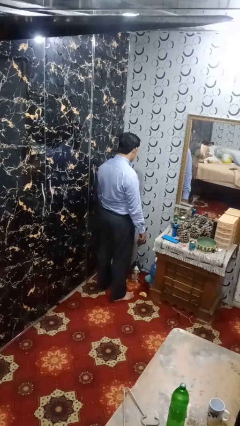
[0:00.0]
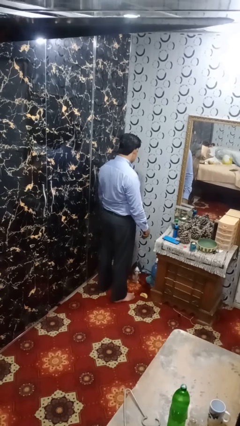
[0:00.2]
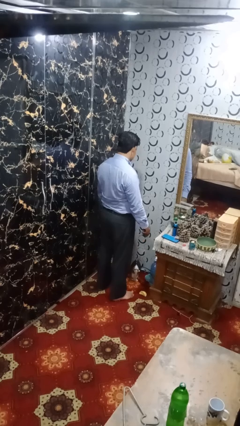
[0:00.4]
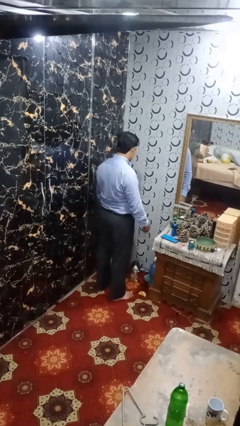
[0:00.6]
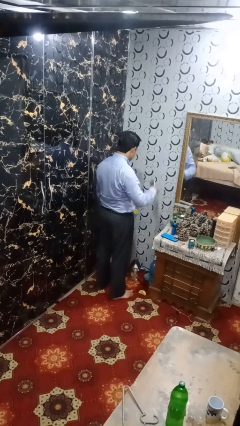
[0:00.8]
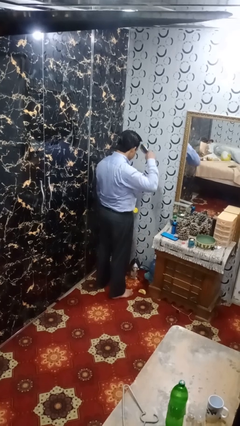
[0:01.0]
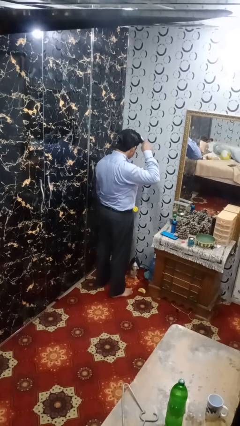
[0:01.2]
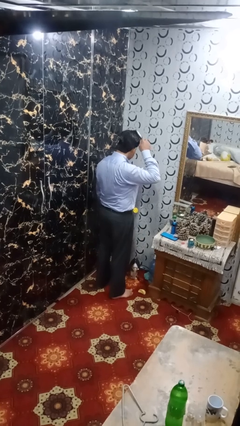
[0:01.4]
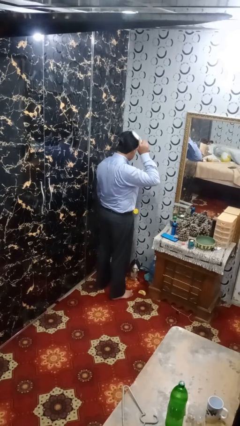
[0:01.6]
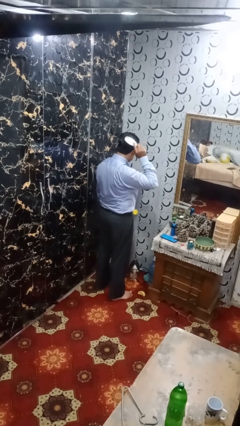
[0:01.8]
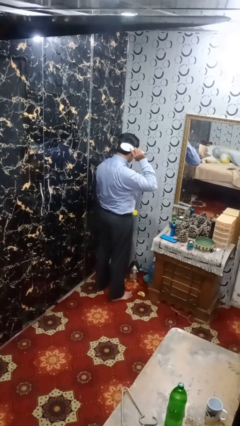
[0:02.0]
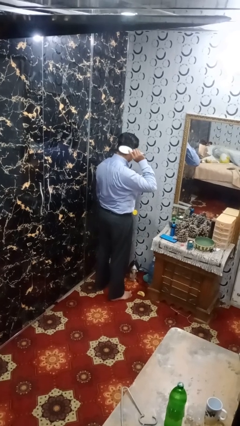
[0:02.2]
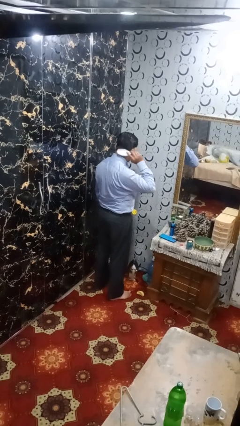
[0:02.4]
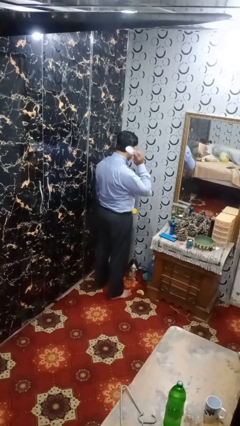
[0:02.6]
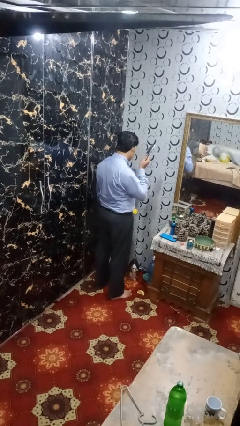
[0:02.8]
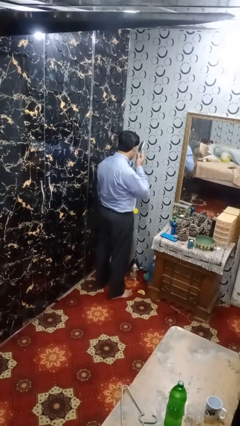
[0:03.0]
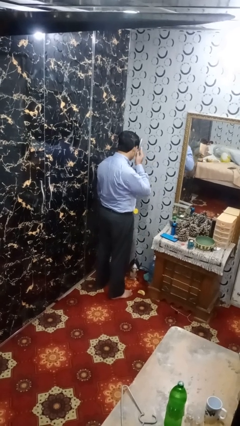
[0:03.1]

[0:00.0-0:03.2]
person brushes hair

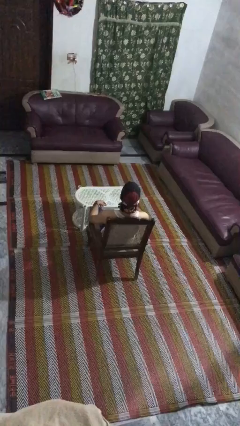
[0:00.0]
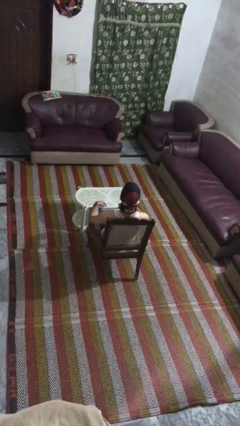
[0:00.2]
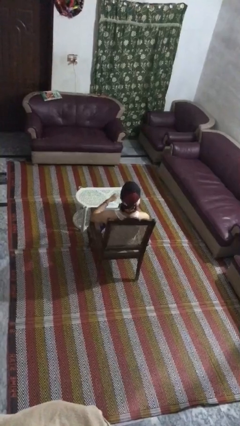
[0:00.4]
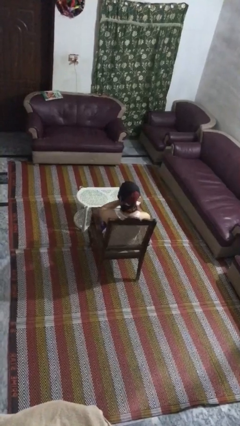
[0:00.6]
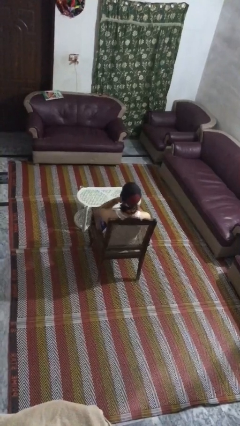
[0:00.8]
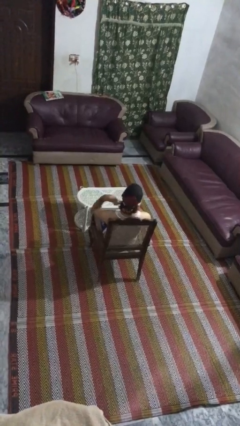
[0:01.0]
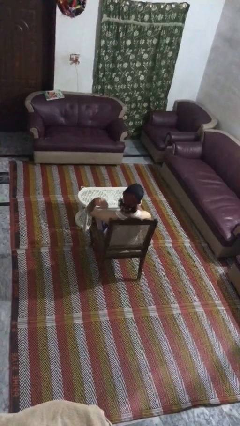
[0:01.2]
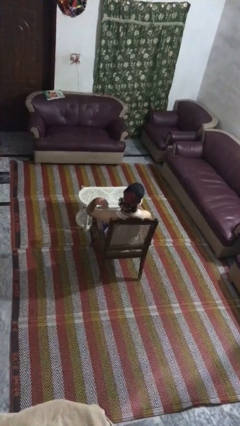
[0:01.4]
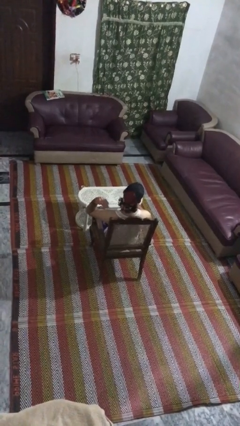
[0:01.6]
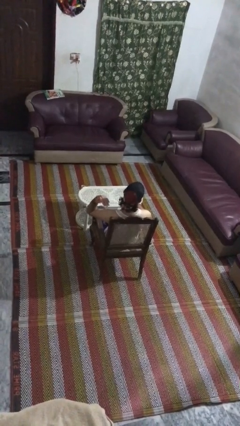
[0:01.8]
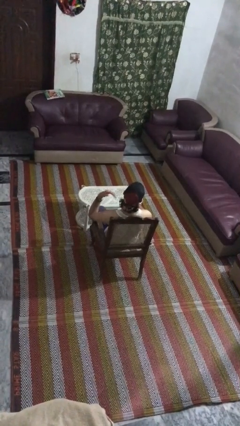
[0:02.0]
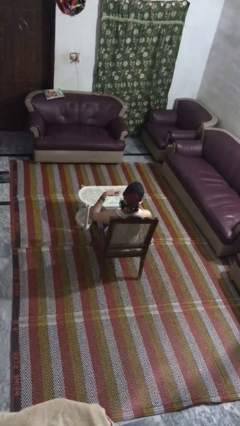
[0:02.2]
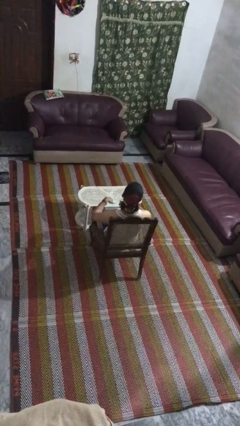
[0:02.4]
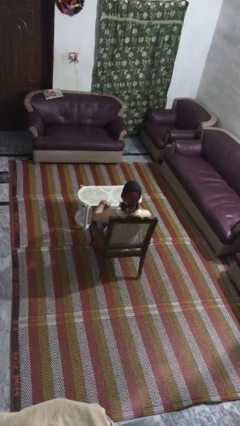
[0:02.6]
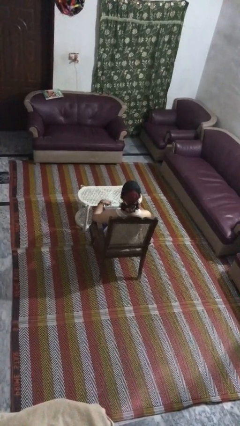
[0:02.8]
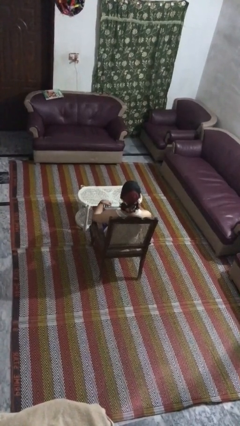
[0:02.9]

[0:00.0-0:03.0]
person gestures cut

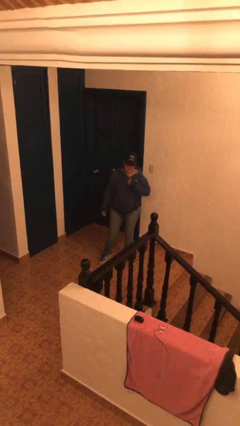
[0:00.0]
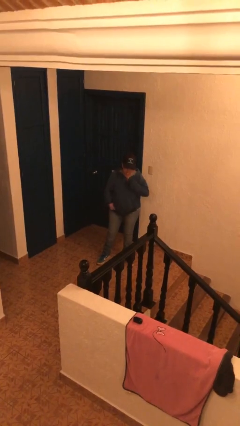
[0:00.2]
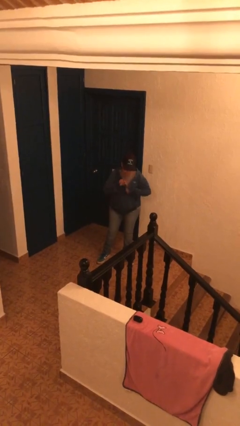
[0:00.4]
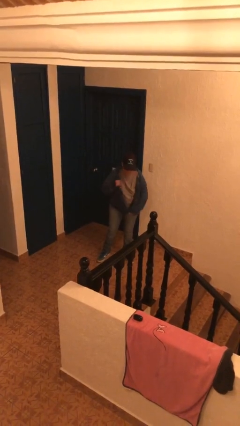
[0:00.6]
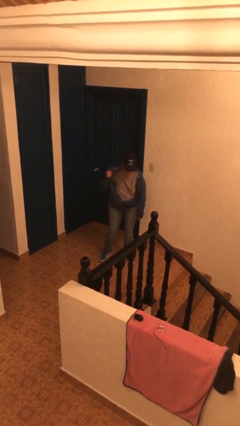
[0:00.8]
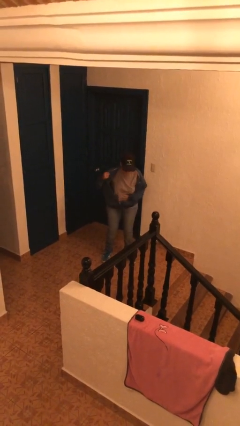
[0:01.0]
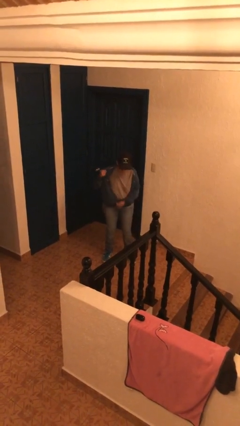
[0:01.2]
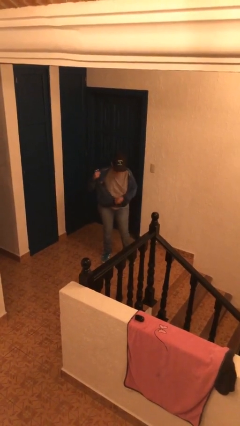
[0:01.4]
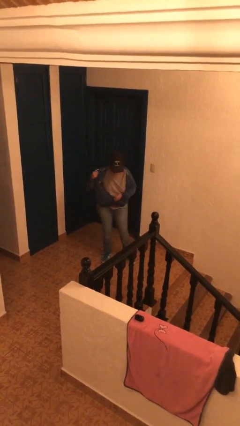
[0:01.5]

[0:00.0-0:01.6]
person unzips jacket

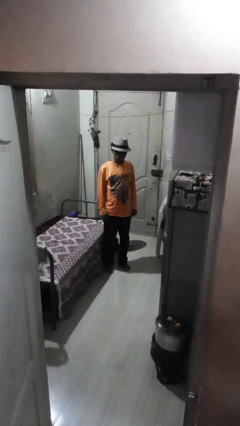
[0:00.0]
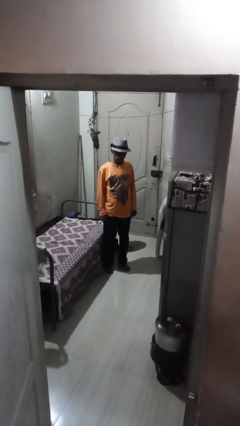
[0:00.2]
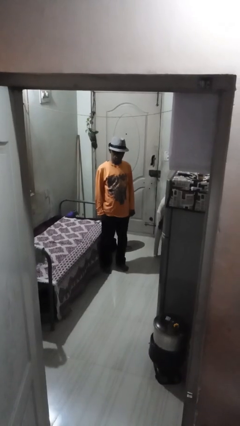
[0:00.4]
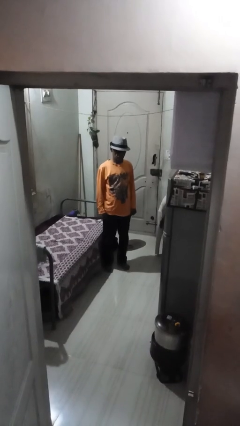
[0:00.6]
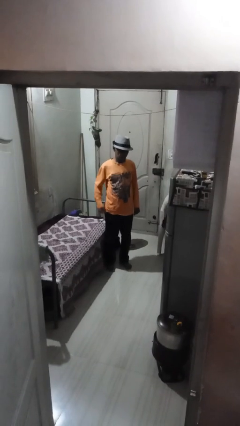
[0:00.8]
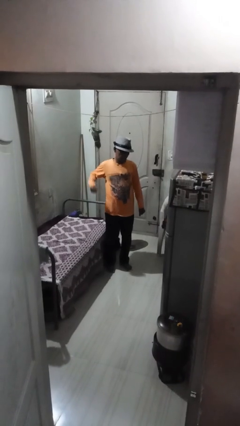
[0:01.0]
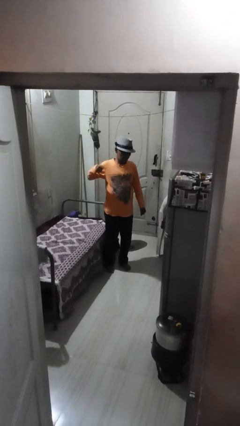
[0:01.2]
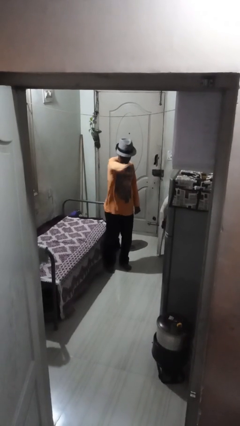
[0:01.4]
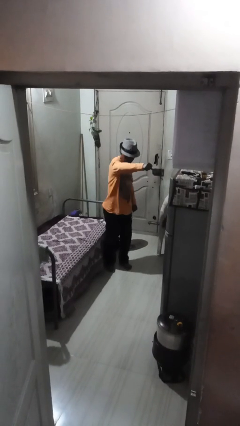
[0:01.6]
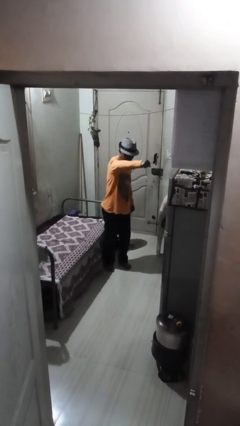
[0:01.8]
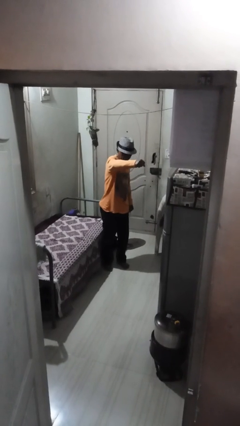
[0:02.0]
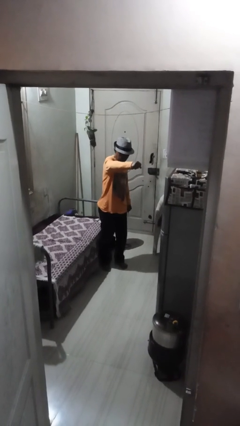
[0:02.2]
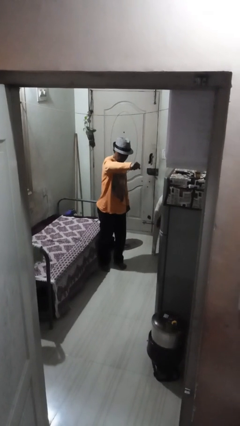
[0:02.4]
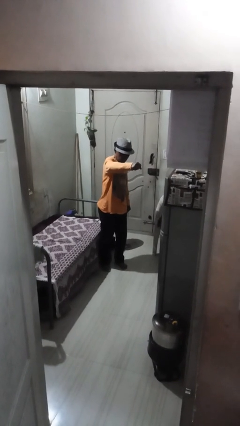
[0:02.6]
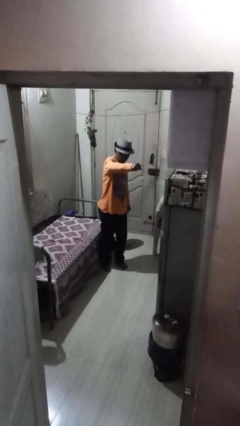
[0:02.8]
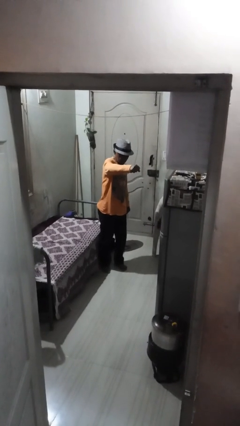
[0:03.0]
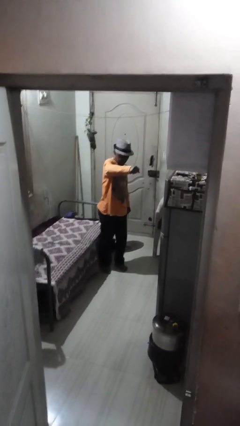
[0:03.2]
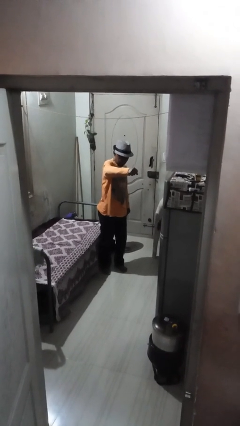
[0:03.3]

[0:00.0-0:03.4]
person punches

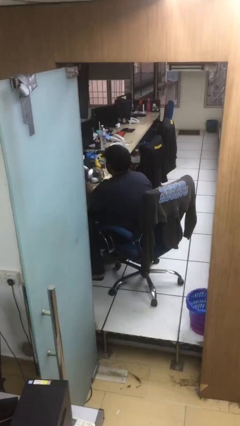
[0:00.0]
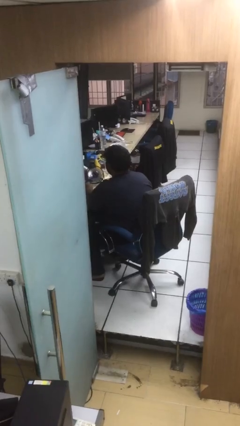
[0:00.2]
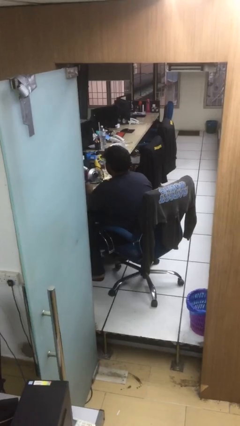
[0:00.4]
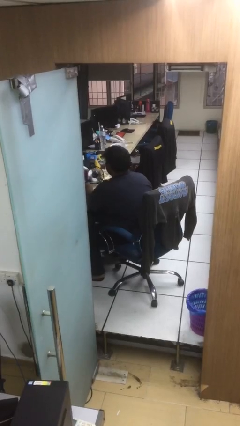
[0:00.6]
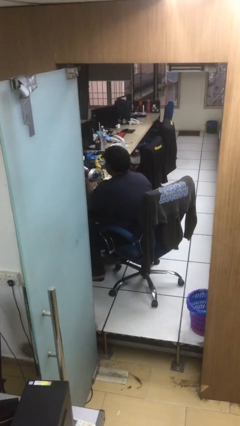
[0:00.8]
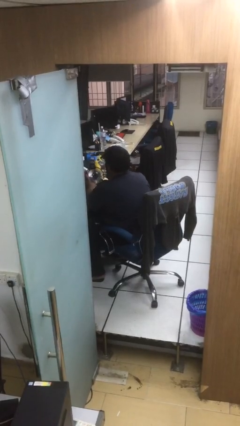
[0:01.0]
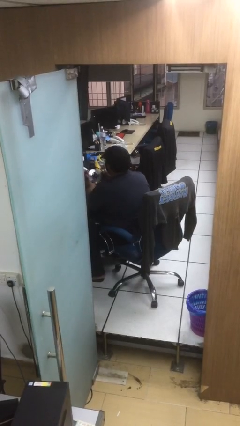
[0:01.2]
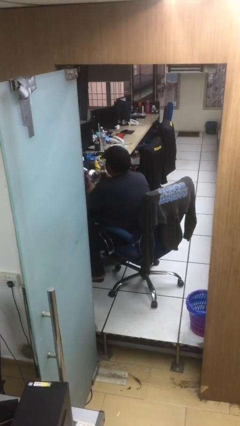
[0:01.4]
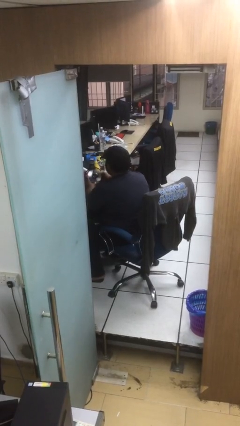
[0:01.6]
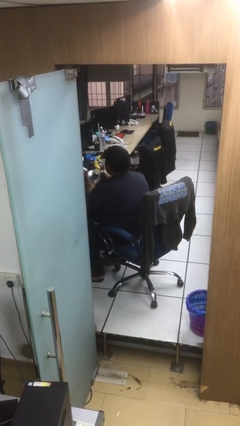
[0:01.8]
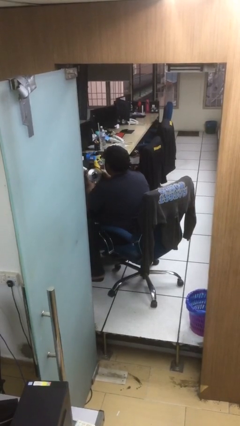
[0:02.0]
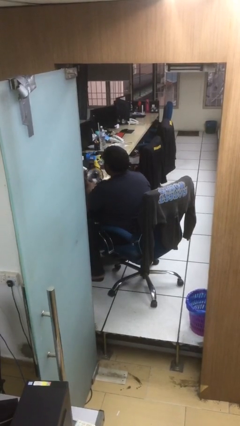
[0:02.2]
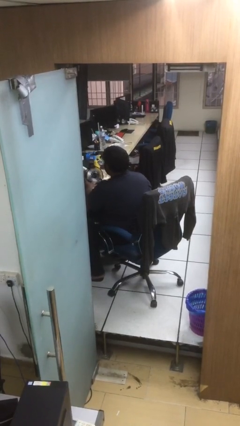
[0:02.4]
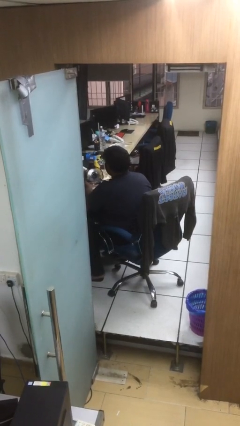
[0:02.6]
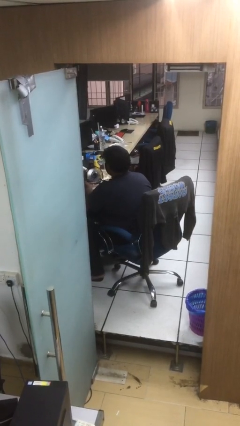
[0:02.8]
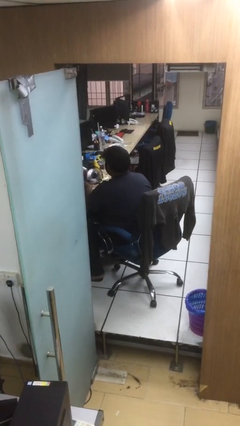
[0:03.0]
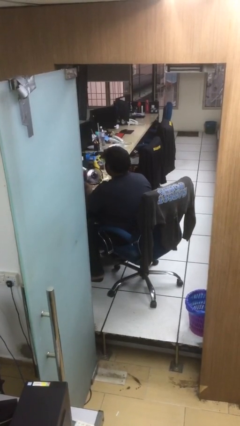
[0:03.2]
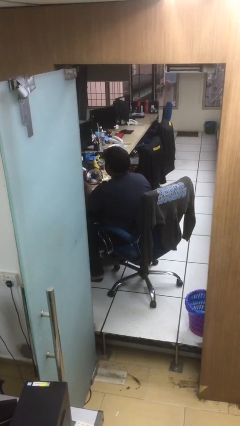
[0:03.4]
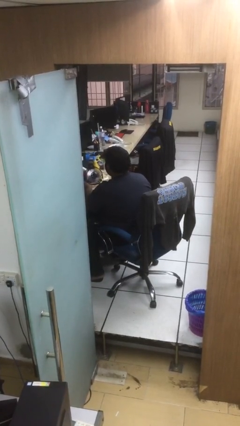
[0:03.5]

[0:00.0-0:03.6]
person turns on fan

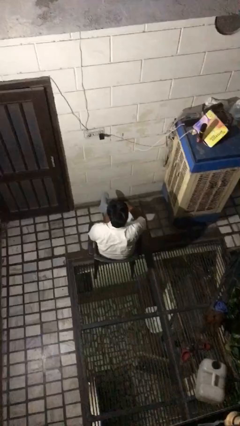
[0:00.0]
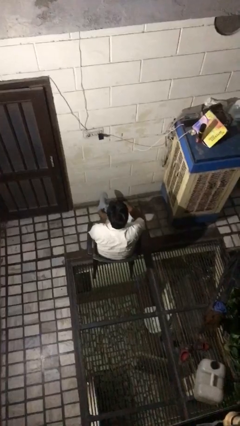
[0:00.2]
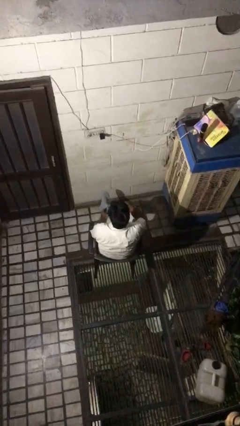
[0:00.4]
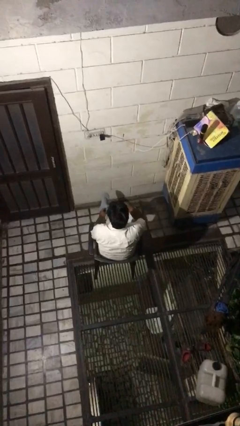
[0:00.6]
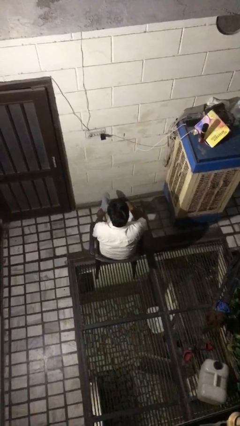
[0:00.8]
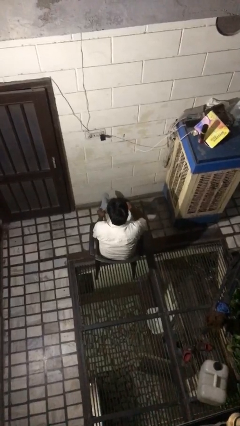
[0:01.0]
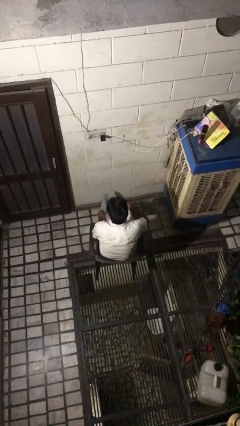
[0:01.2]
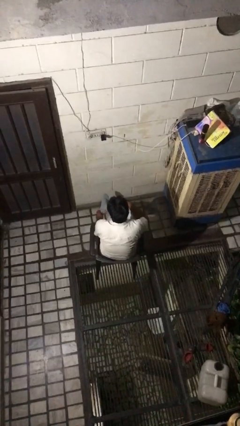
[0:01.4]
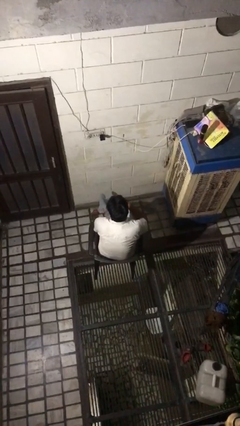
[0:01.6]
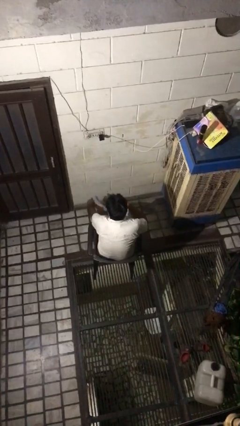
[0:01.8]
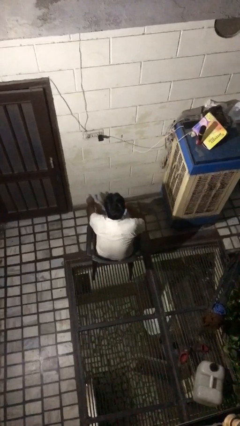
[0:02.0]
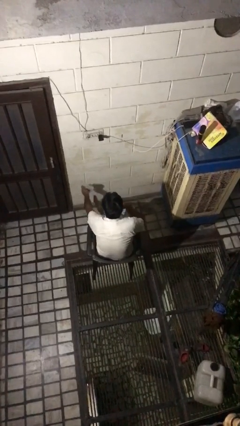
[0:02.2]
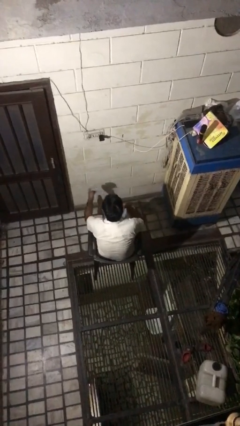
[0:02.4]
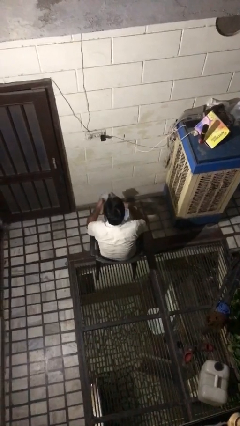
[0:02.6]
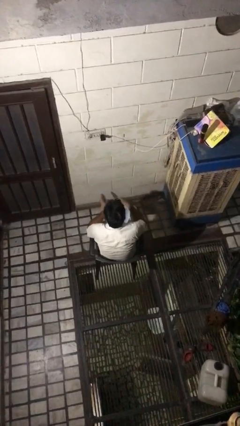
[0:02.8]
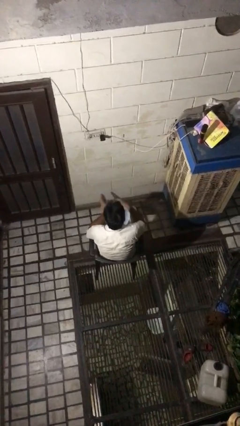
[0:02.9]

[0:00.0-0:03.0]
person takes off socks
